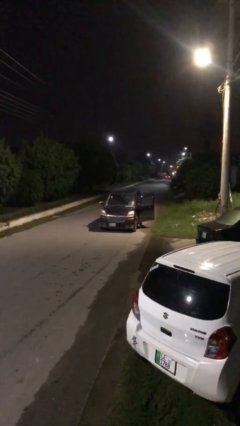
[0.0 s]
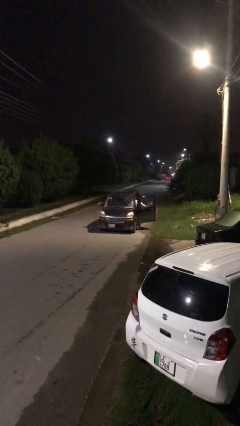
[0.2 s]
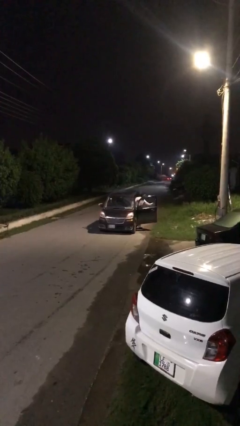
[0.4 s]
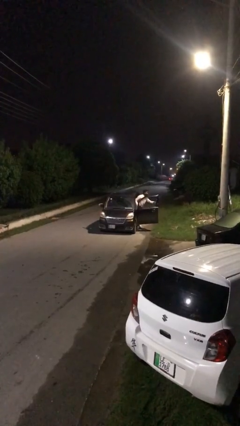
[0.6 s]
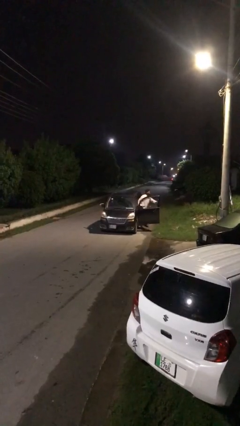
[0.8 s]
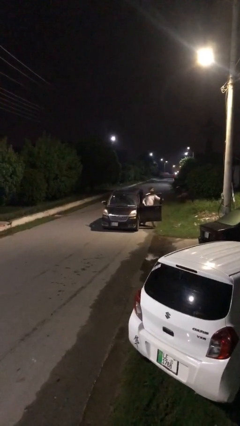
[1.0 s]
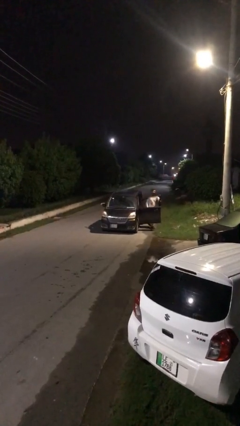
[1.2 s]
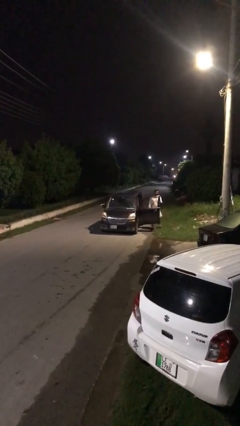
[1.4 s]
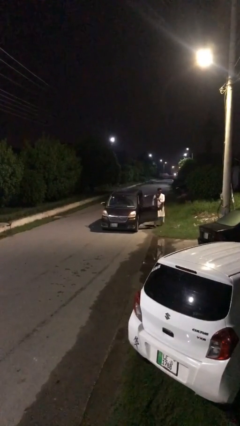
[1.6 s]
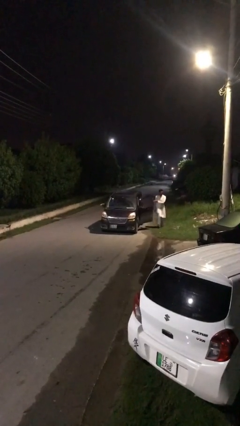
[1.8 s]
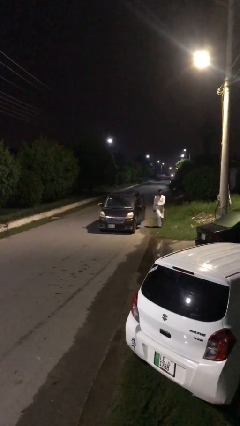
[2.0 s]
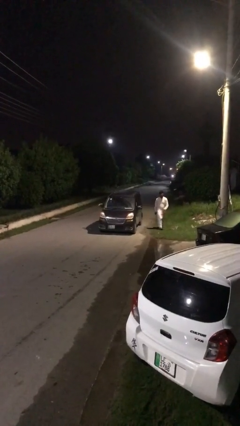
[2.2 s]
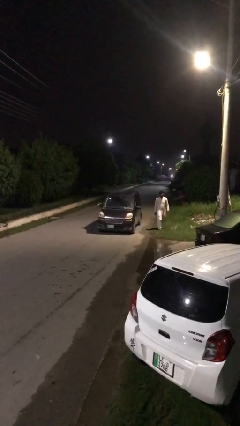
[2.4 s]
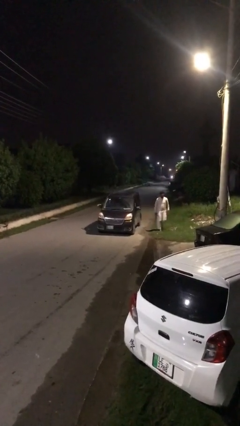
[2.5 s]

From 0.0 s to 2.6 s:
car drops off person

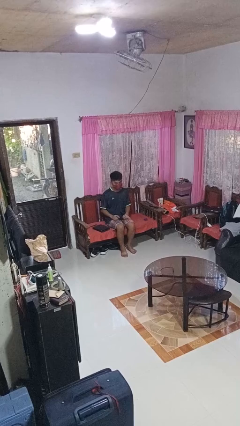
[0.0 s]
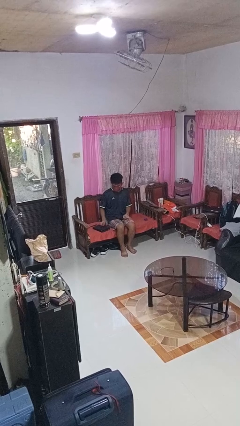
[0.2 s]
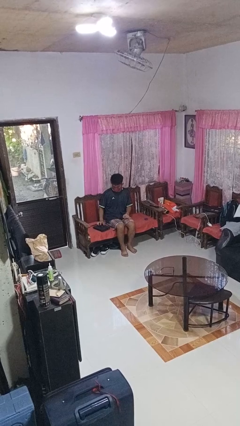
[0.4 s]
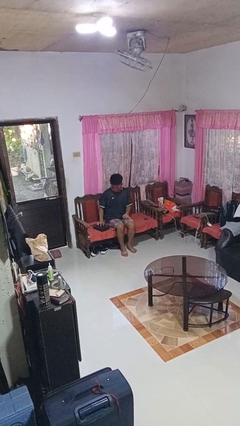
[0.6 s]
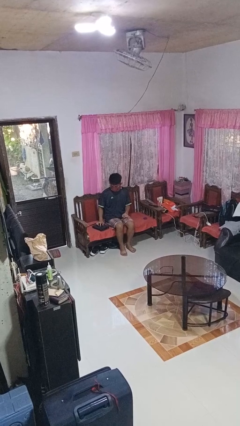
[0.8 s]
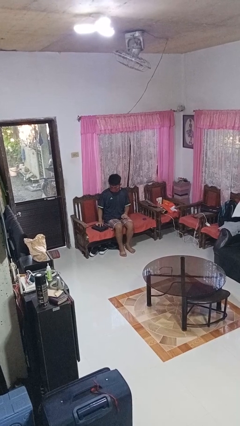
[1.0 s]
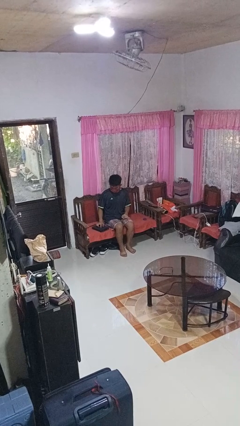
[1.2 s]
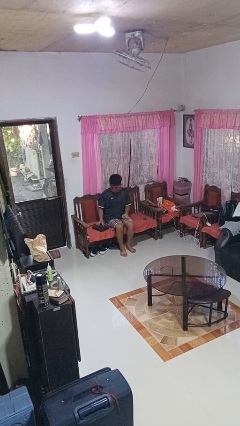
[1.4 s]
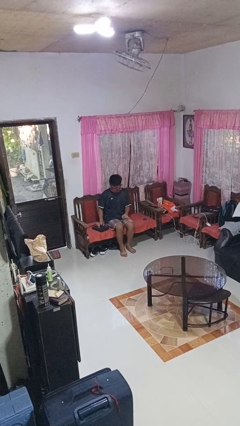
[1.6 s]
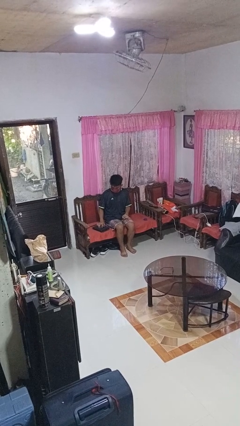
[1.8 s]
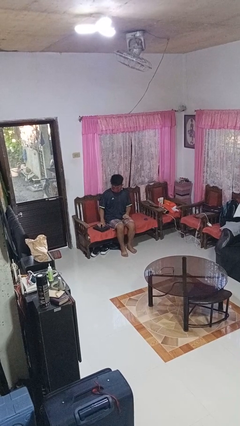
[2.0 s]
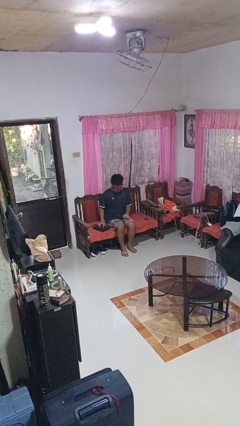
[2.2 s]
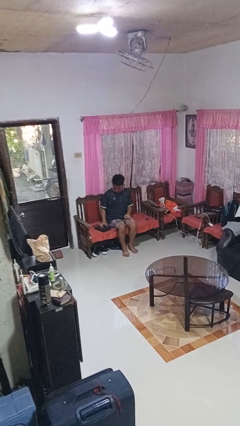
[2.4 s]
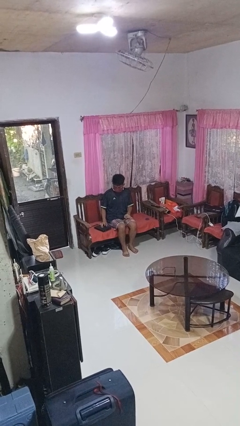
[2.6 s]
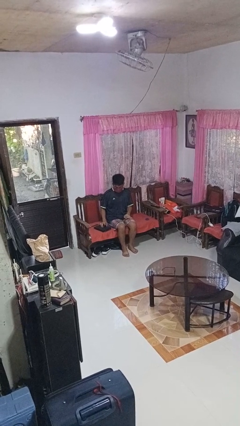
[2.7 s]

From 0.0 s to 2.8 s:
person taps object with finger

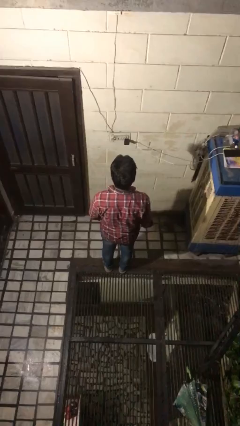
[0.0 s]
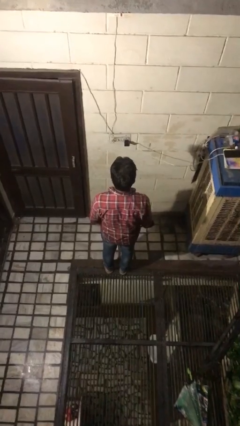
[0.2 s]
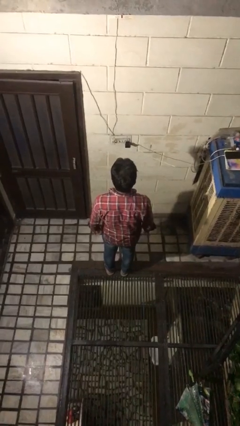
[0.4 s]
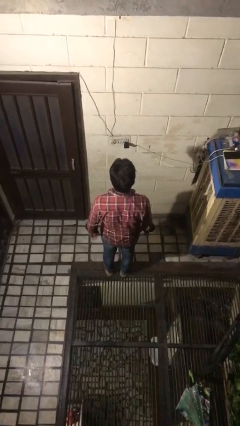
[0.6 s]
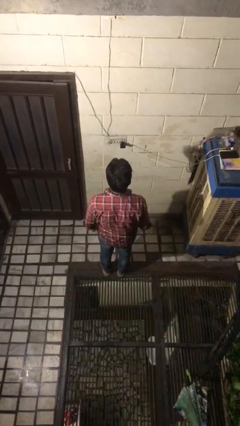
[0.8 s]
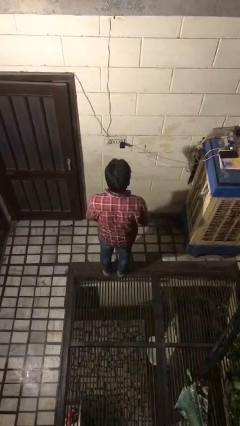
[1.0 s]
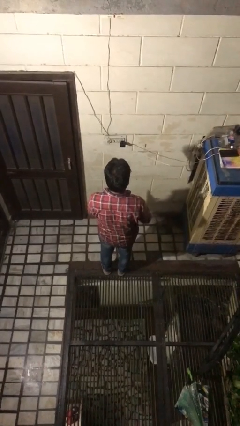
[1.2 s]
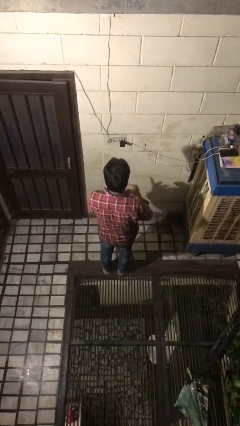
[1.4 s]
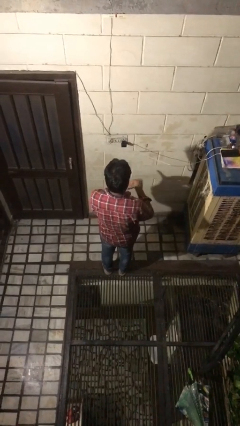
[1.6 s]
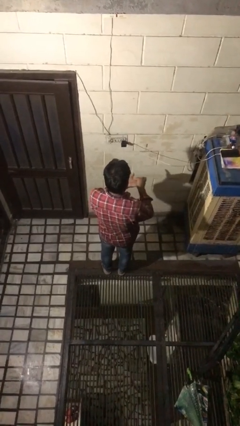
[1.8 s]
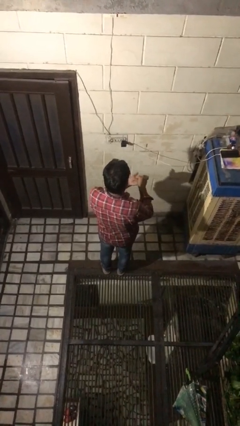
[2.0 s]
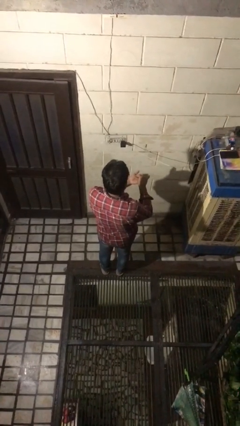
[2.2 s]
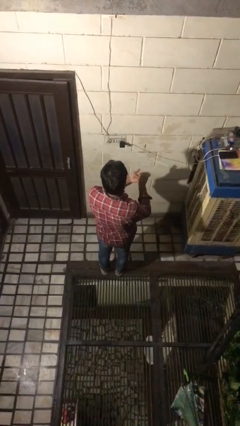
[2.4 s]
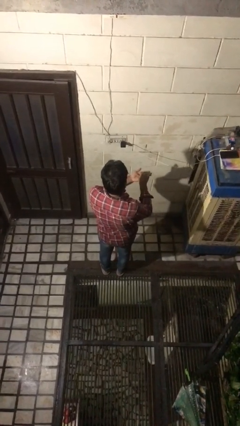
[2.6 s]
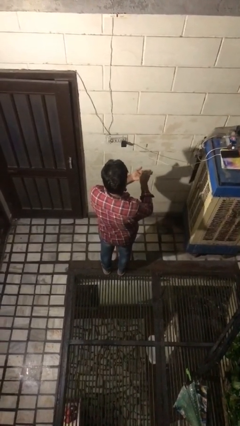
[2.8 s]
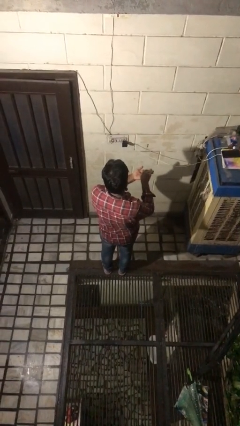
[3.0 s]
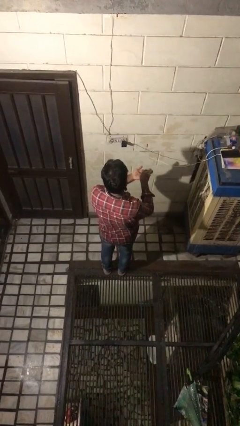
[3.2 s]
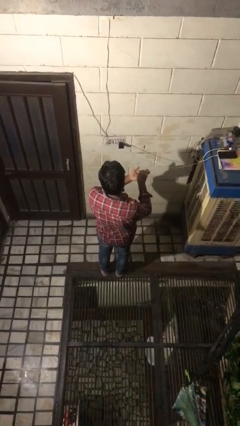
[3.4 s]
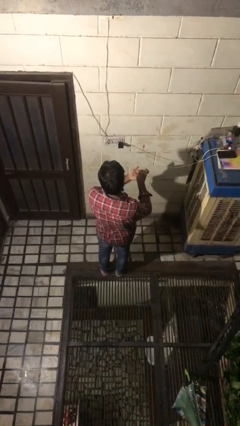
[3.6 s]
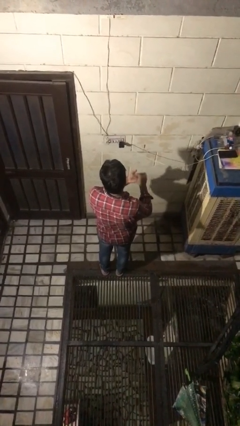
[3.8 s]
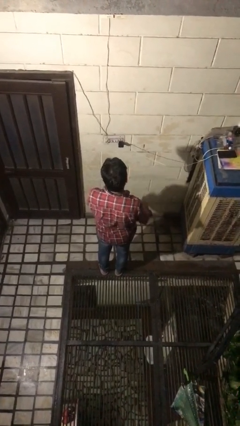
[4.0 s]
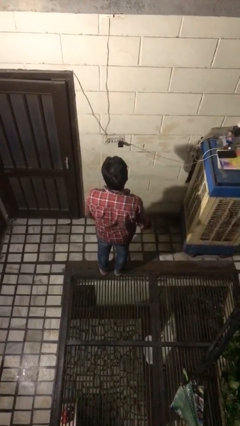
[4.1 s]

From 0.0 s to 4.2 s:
person gestures hang loose

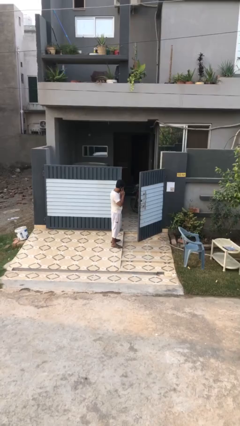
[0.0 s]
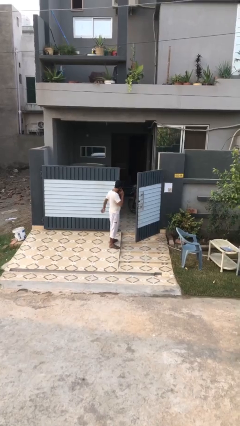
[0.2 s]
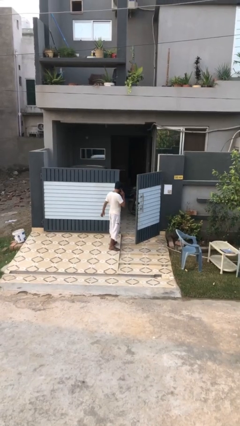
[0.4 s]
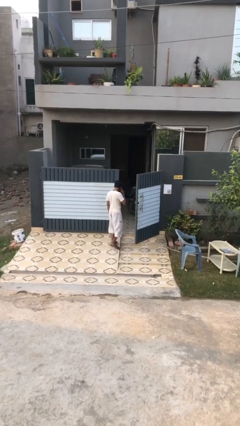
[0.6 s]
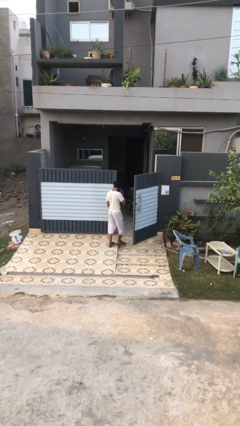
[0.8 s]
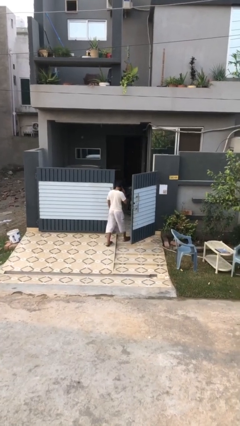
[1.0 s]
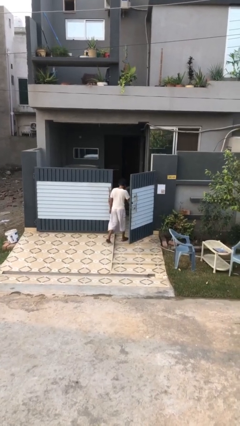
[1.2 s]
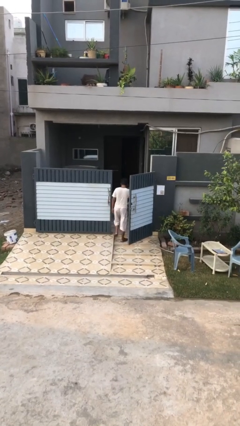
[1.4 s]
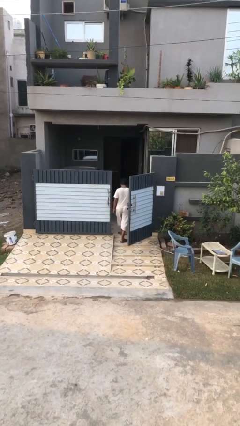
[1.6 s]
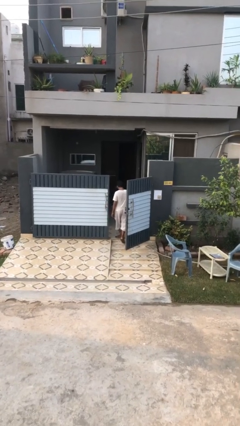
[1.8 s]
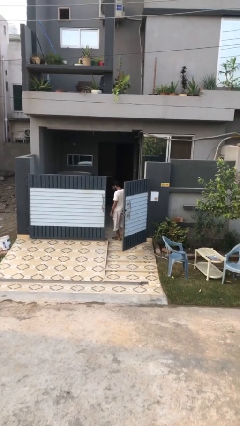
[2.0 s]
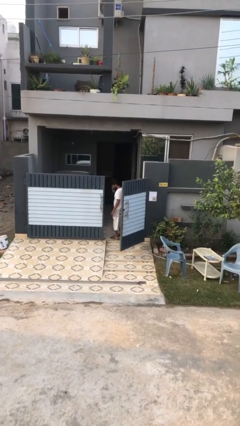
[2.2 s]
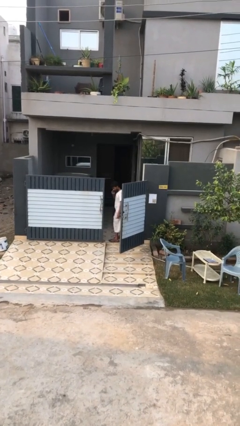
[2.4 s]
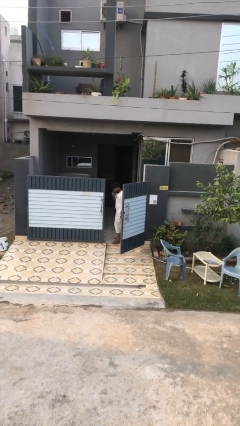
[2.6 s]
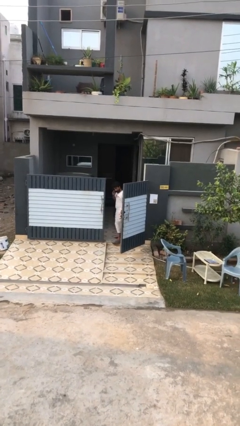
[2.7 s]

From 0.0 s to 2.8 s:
person exits scene through structure

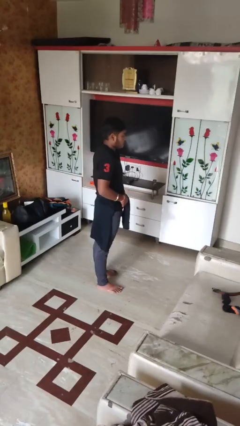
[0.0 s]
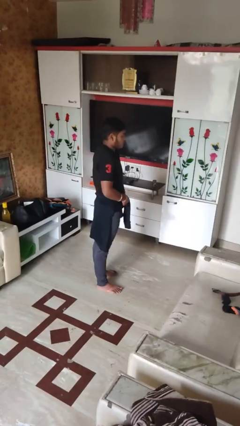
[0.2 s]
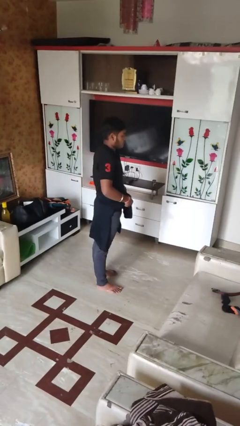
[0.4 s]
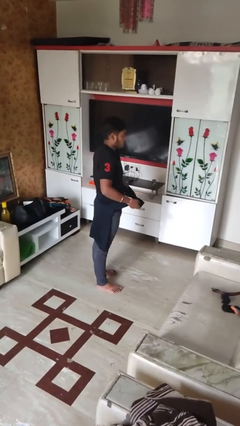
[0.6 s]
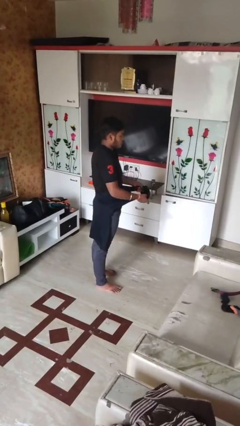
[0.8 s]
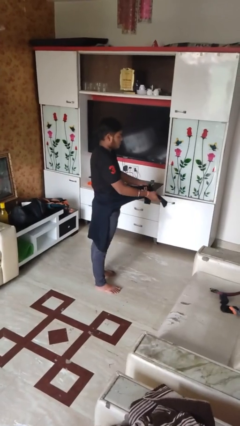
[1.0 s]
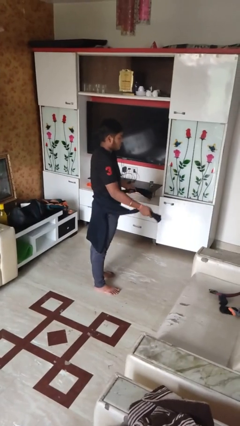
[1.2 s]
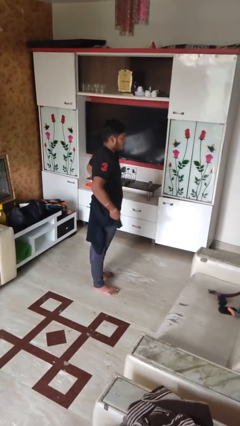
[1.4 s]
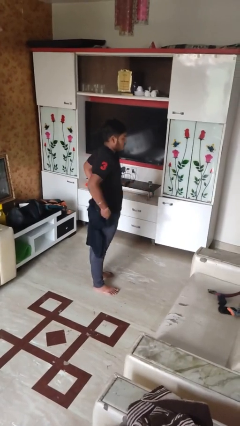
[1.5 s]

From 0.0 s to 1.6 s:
person unties jacket around waist

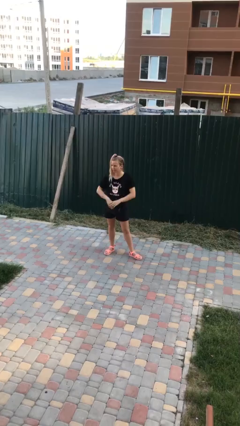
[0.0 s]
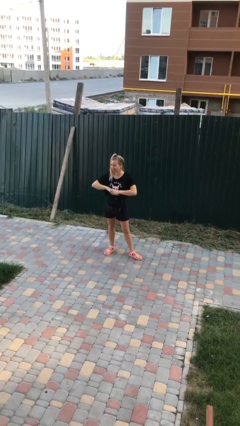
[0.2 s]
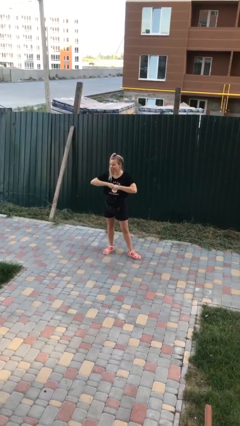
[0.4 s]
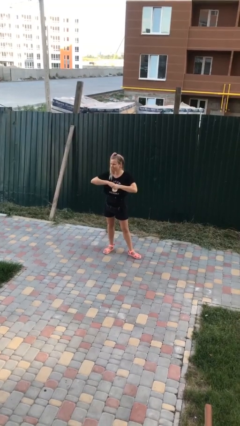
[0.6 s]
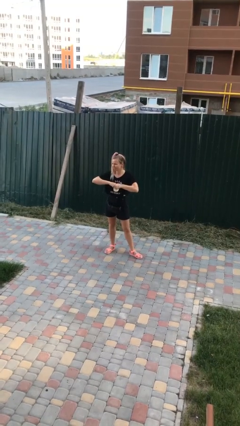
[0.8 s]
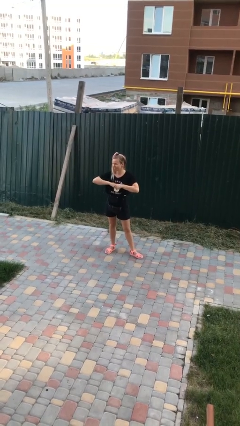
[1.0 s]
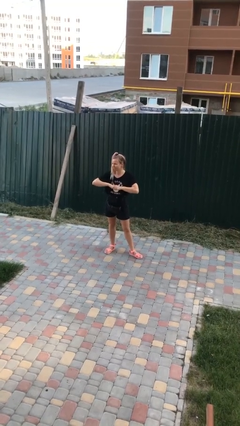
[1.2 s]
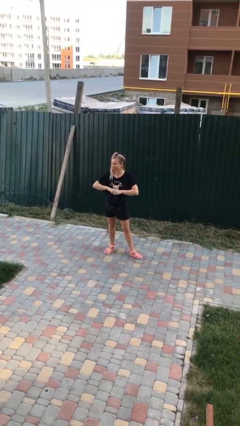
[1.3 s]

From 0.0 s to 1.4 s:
person cracks knuckles

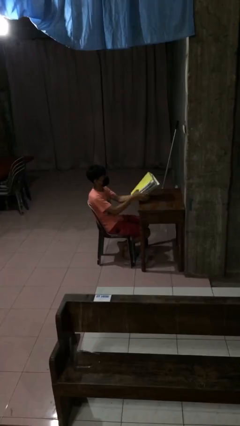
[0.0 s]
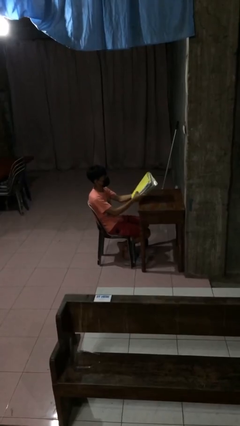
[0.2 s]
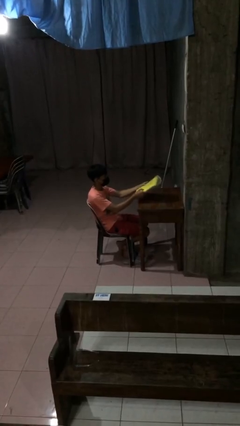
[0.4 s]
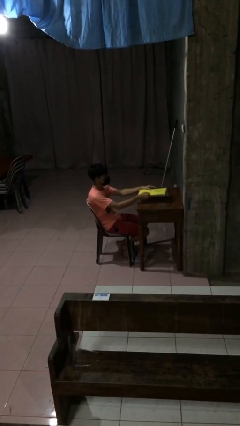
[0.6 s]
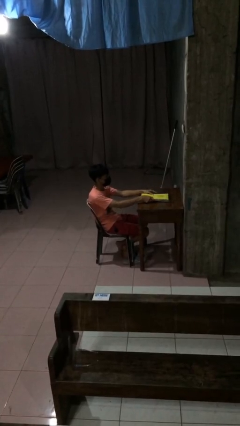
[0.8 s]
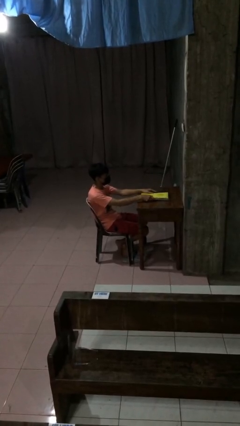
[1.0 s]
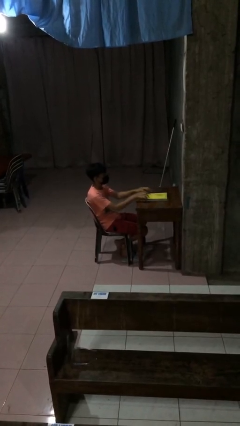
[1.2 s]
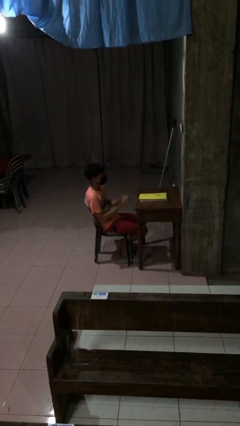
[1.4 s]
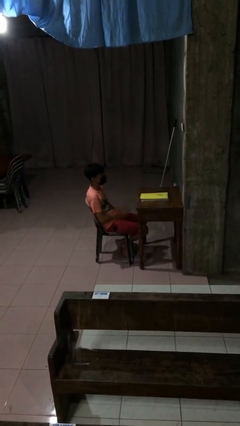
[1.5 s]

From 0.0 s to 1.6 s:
person puts down object on table
